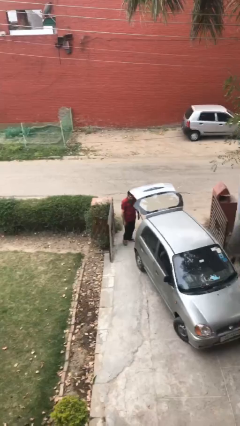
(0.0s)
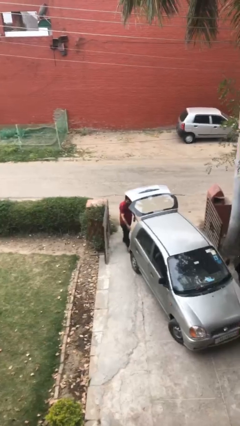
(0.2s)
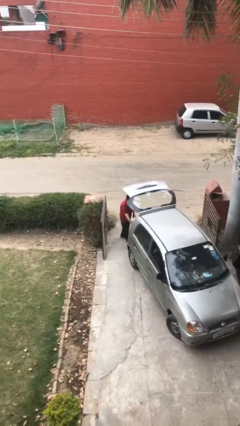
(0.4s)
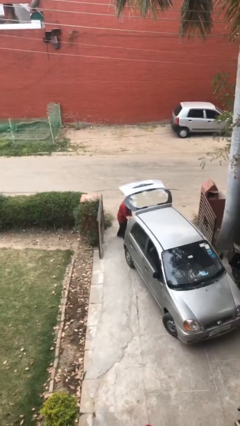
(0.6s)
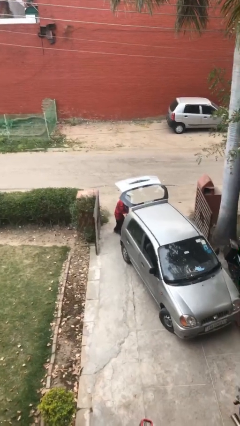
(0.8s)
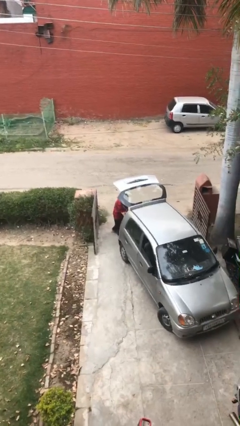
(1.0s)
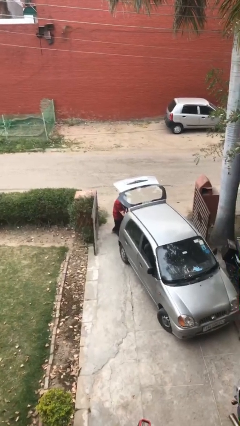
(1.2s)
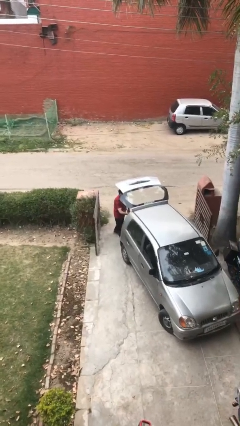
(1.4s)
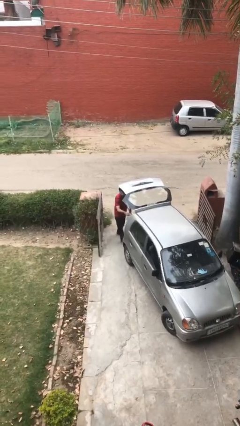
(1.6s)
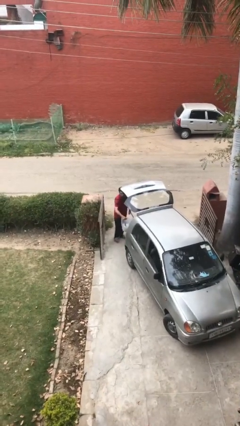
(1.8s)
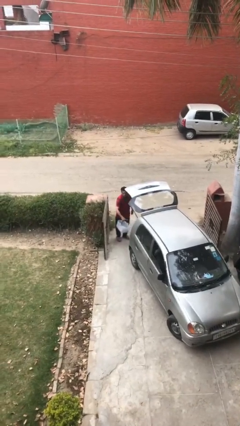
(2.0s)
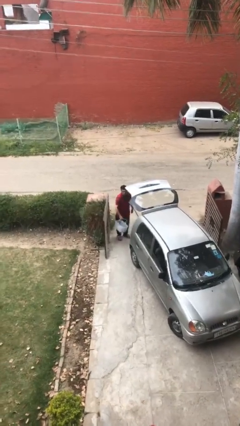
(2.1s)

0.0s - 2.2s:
person unloads car

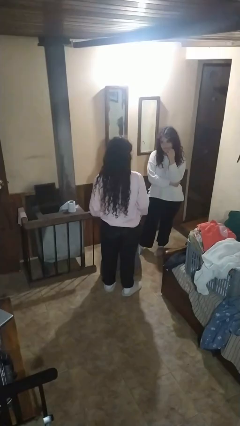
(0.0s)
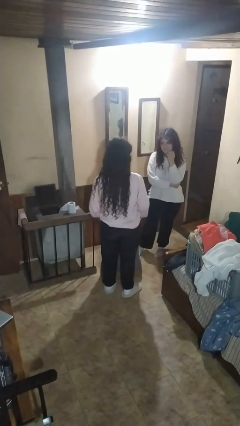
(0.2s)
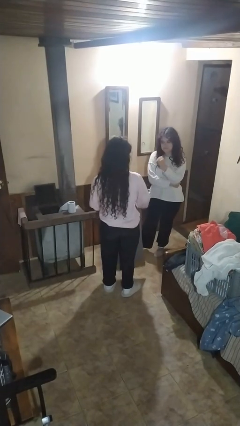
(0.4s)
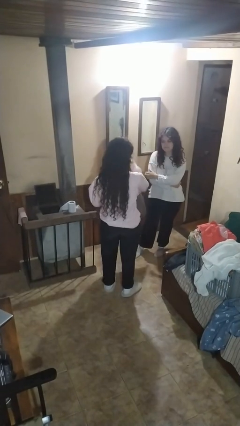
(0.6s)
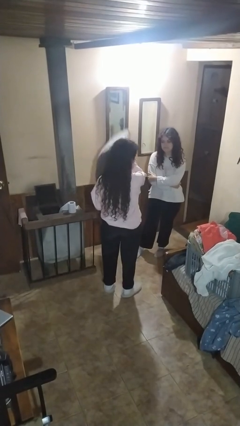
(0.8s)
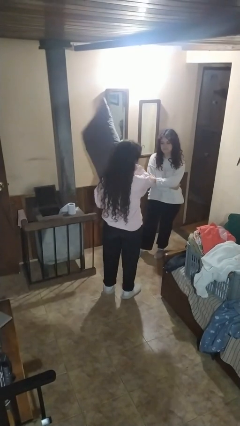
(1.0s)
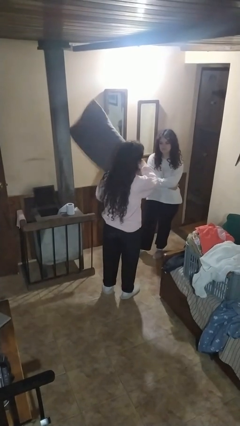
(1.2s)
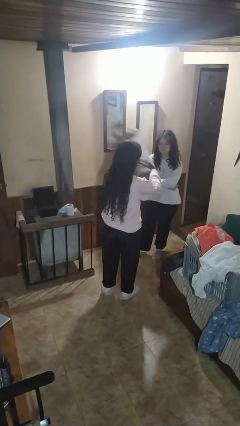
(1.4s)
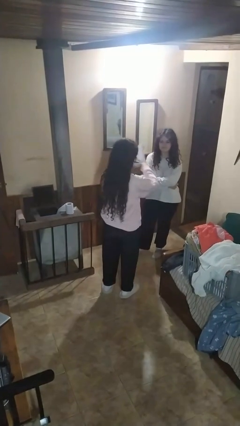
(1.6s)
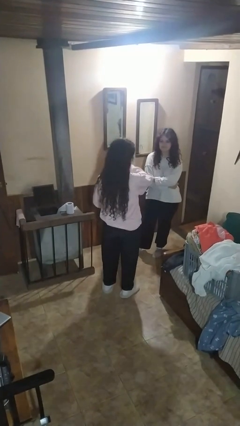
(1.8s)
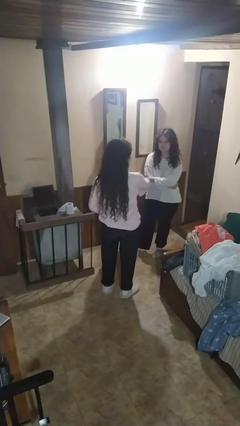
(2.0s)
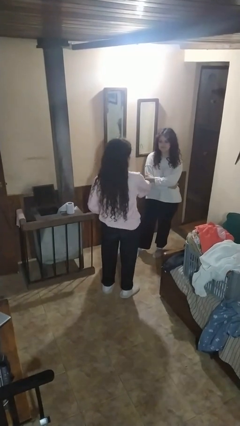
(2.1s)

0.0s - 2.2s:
person hits person with pillow

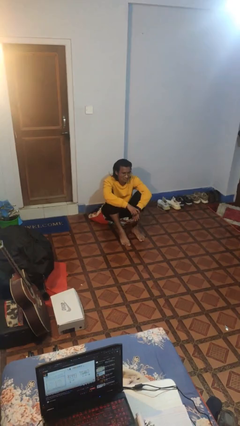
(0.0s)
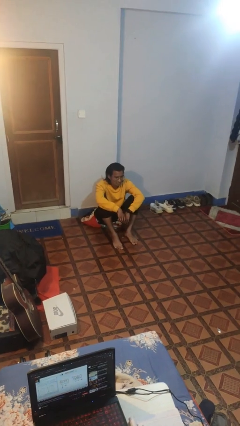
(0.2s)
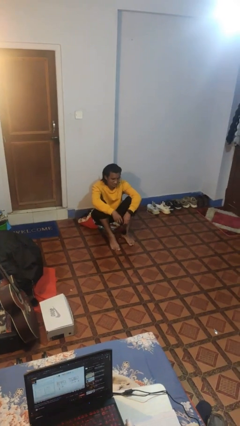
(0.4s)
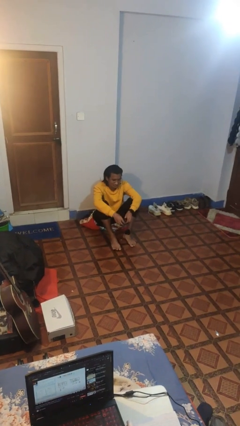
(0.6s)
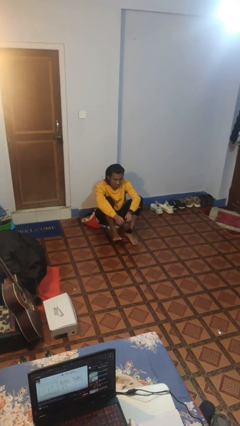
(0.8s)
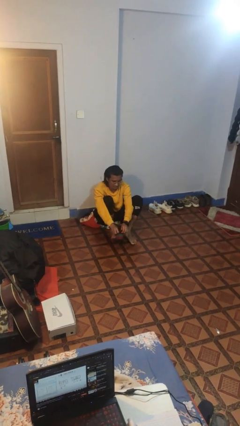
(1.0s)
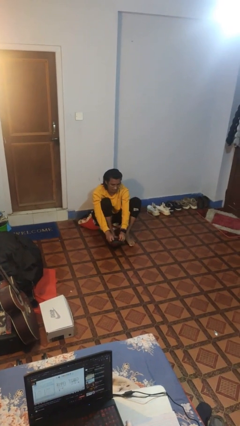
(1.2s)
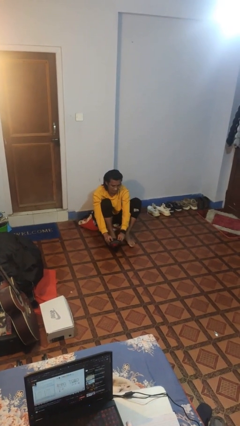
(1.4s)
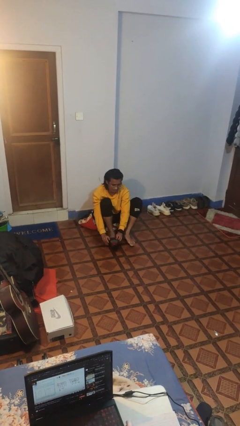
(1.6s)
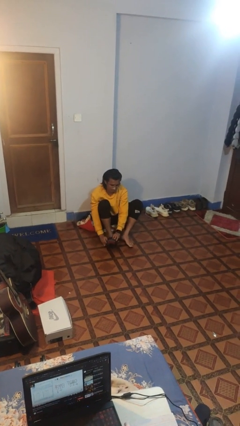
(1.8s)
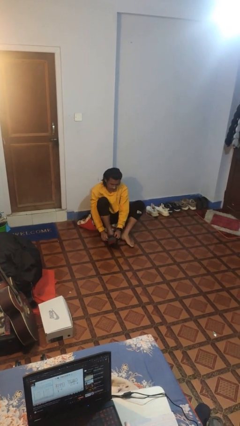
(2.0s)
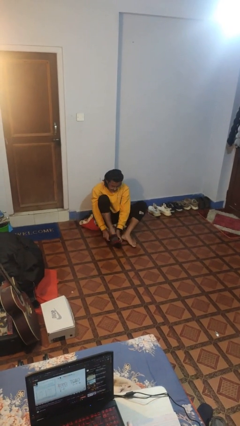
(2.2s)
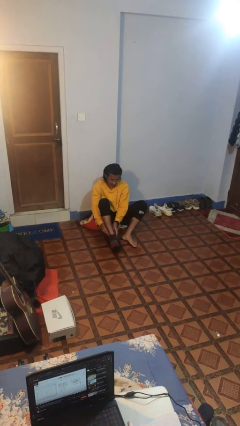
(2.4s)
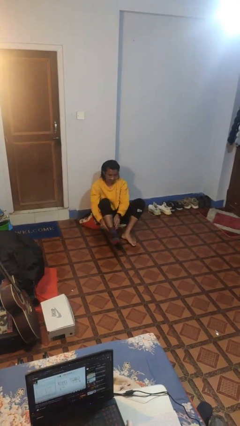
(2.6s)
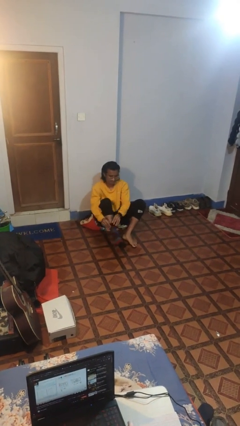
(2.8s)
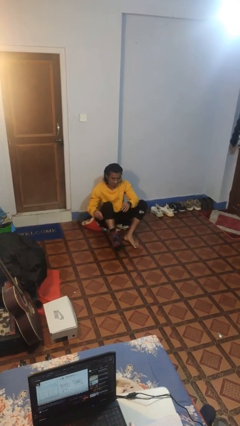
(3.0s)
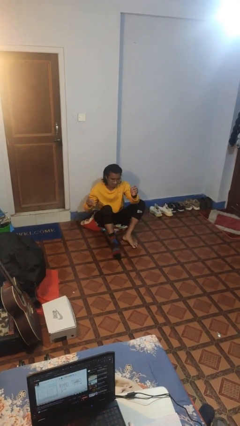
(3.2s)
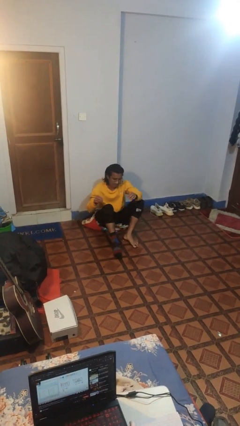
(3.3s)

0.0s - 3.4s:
person puts on socks

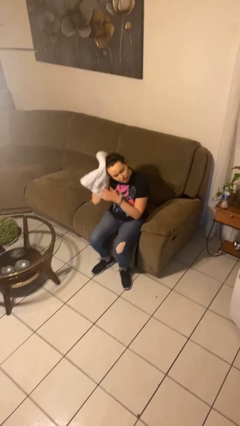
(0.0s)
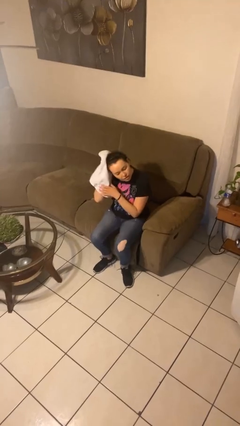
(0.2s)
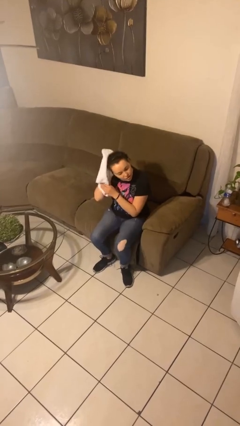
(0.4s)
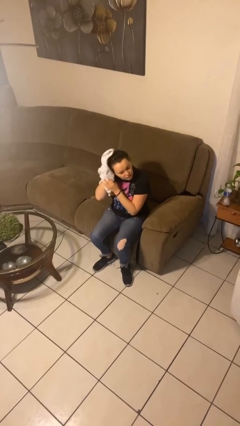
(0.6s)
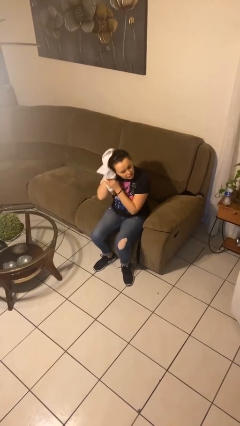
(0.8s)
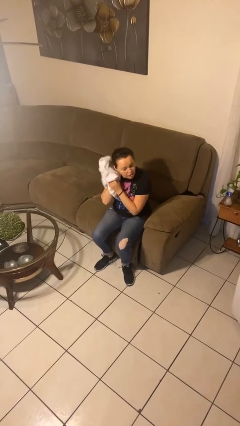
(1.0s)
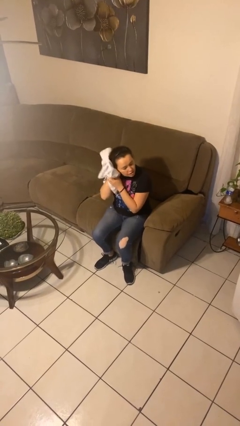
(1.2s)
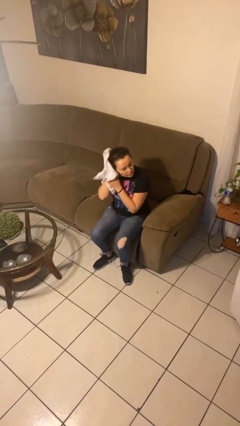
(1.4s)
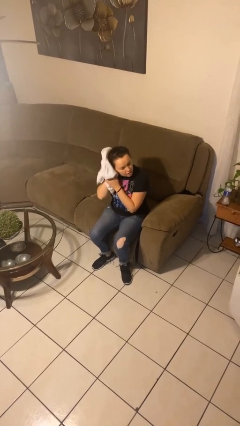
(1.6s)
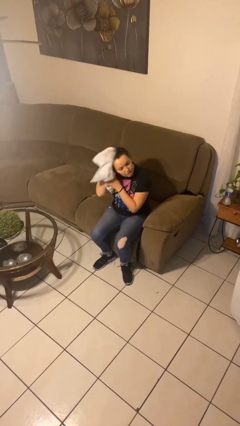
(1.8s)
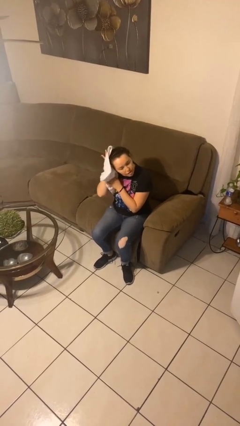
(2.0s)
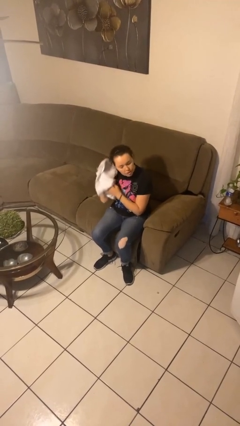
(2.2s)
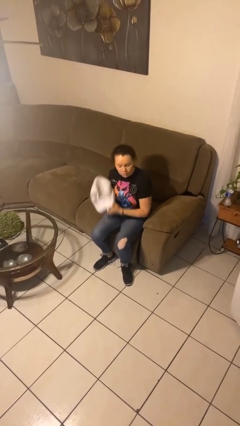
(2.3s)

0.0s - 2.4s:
person dries hair with towel

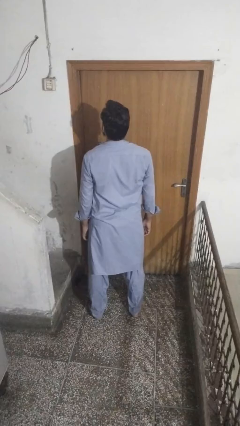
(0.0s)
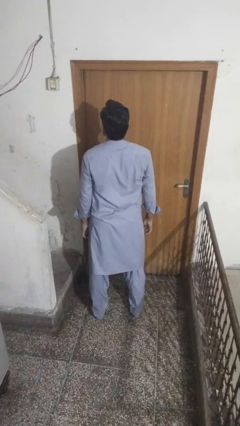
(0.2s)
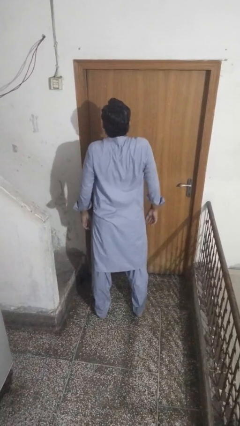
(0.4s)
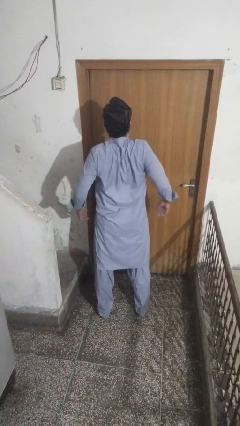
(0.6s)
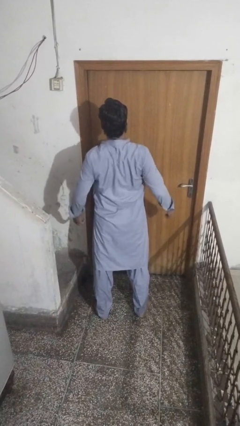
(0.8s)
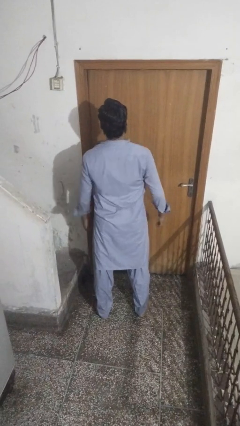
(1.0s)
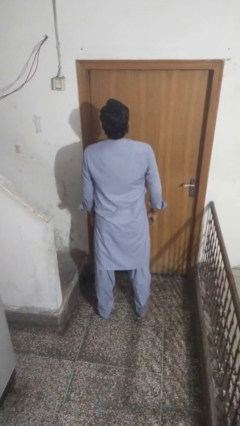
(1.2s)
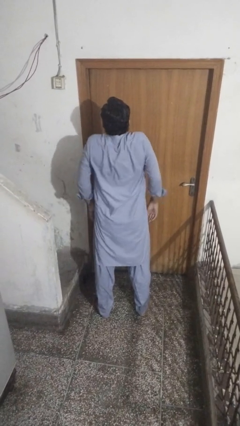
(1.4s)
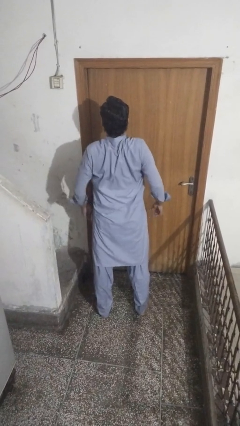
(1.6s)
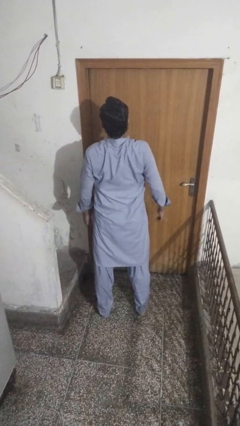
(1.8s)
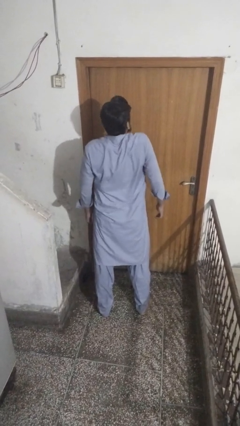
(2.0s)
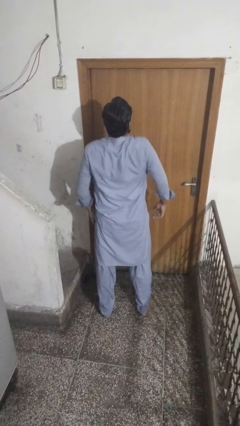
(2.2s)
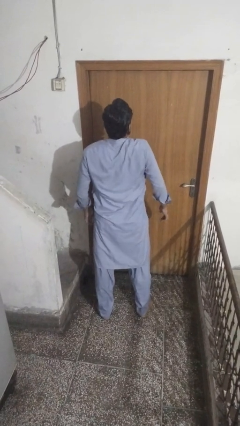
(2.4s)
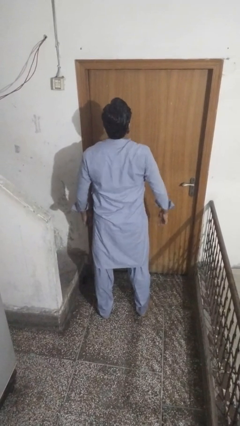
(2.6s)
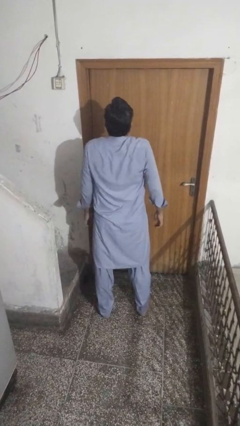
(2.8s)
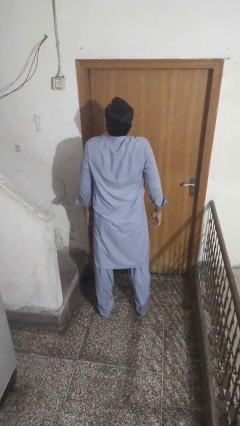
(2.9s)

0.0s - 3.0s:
person shrugs

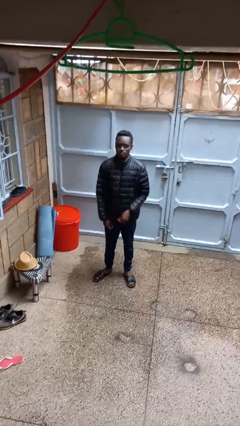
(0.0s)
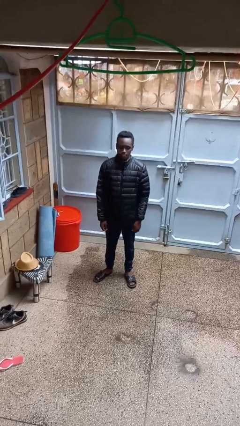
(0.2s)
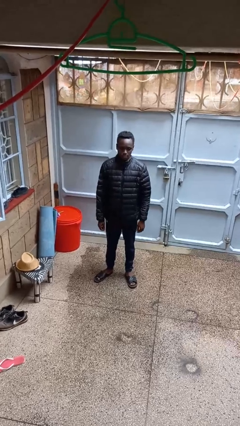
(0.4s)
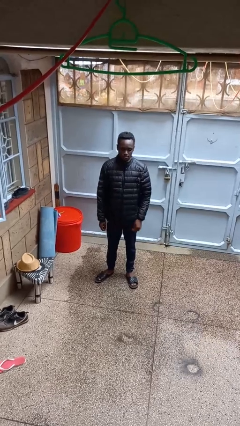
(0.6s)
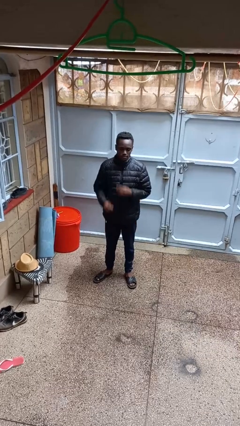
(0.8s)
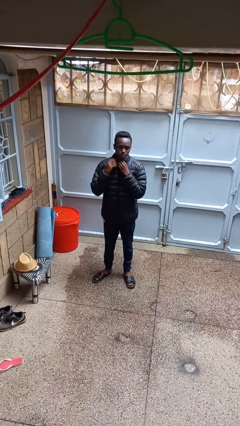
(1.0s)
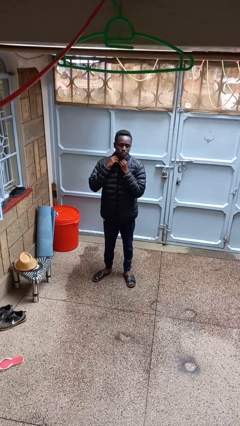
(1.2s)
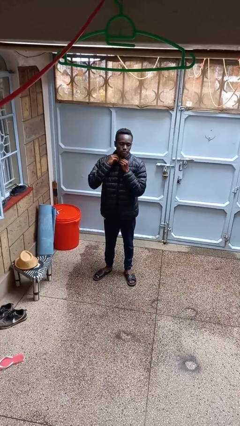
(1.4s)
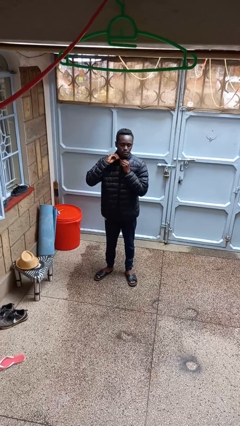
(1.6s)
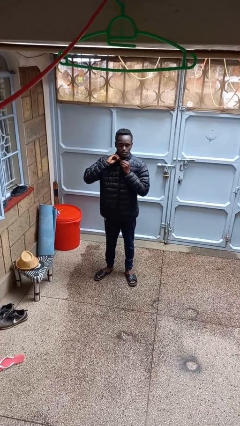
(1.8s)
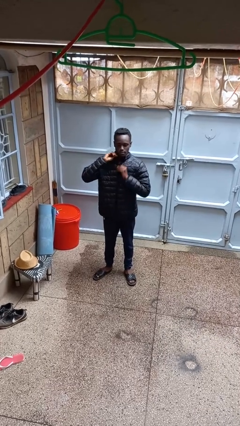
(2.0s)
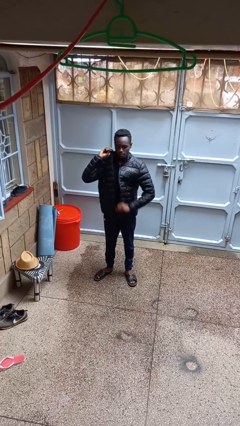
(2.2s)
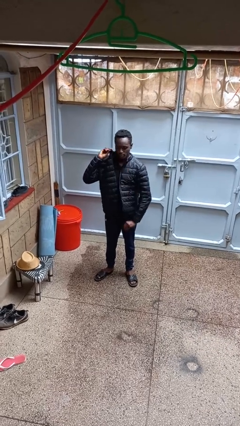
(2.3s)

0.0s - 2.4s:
person unzips jacket

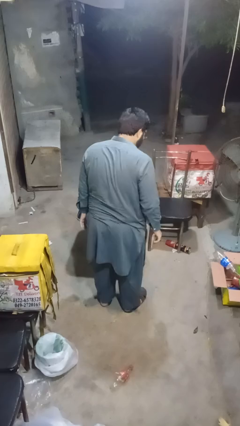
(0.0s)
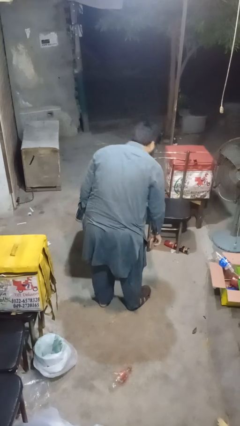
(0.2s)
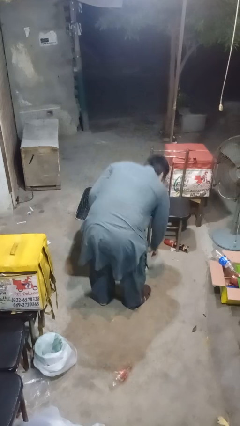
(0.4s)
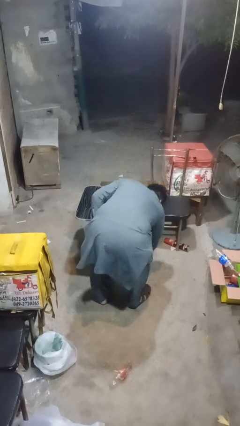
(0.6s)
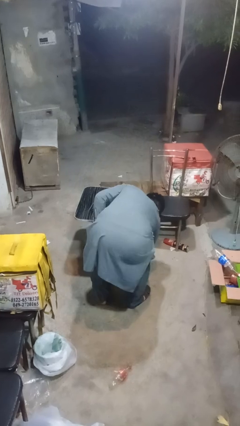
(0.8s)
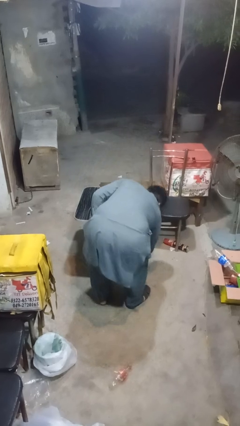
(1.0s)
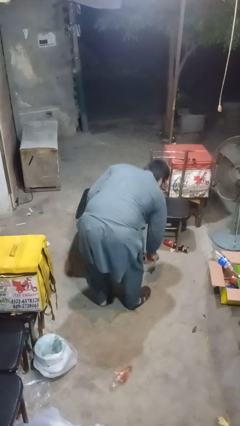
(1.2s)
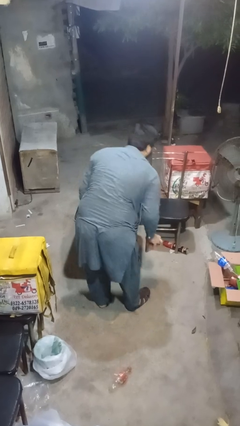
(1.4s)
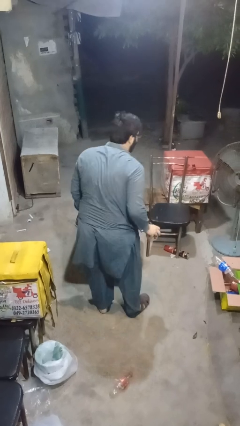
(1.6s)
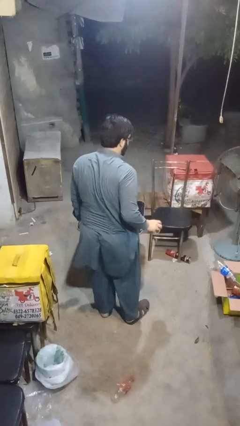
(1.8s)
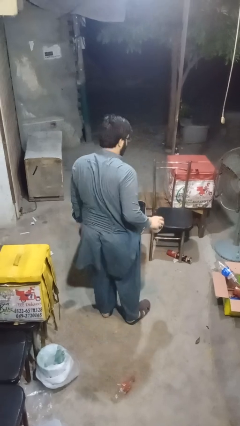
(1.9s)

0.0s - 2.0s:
person picks up object from floor
